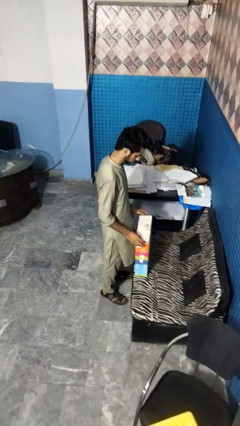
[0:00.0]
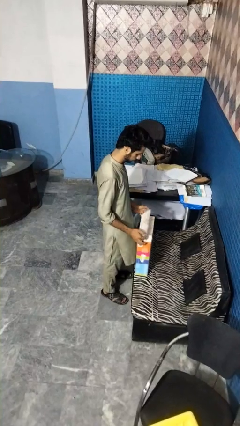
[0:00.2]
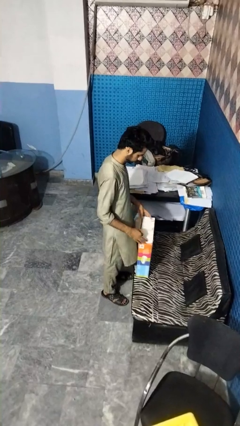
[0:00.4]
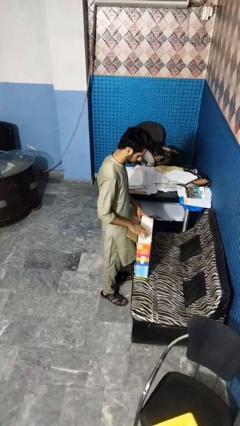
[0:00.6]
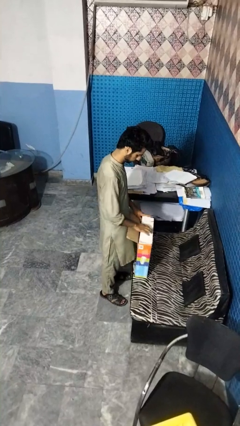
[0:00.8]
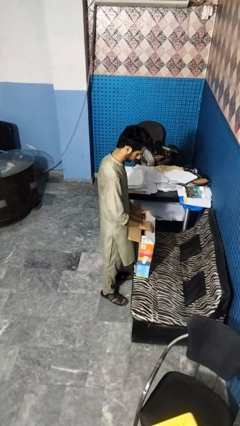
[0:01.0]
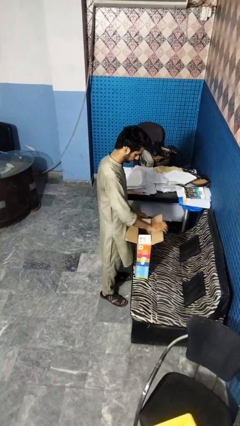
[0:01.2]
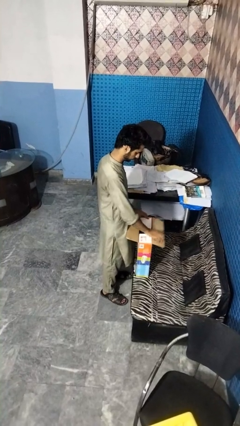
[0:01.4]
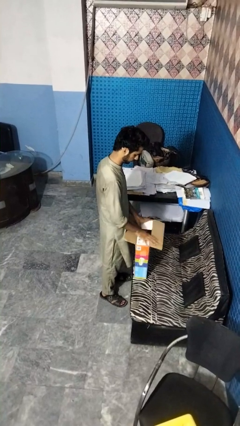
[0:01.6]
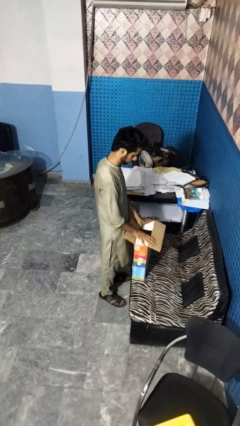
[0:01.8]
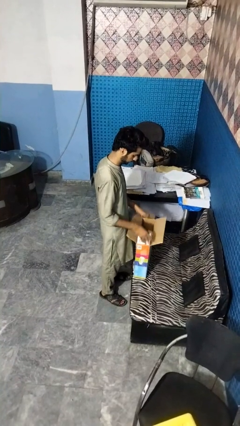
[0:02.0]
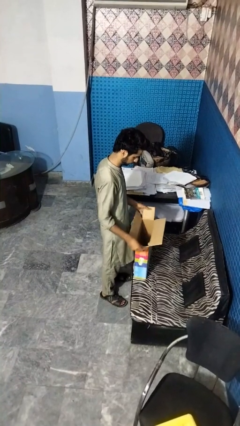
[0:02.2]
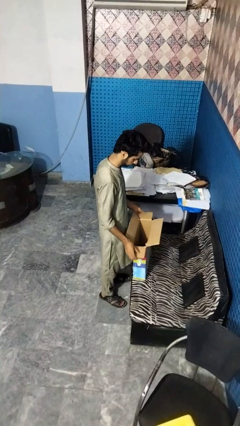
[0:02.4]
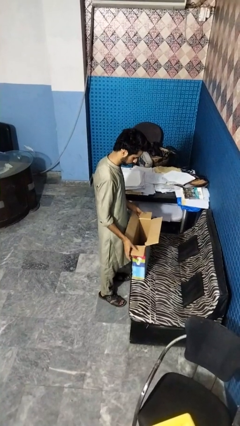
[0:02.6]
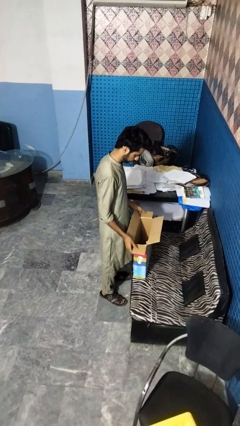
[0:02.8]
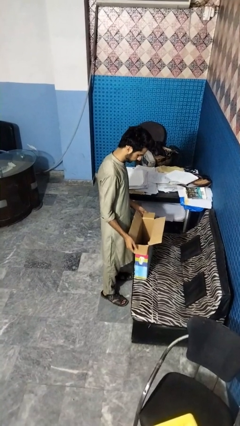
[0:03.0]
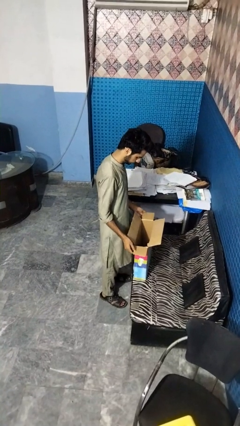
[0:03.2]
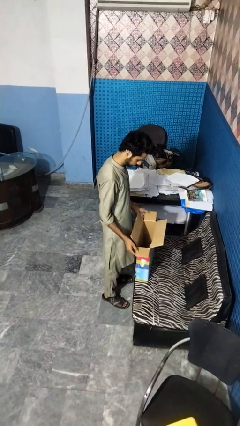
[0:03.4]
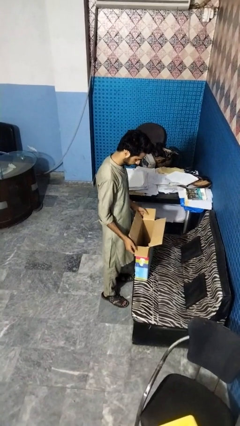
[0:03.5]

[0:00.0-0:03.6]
person opens box

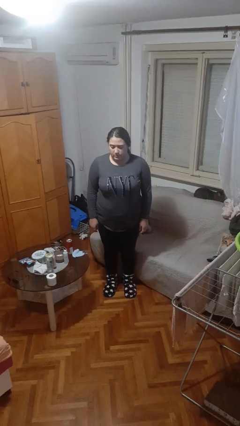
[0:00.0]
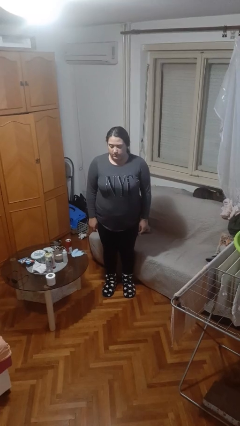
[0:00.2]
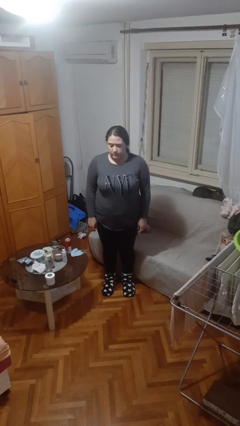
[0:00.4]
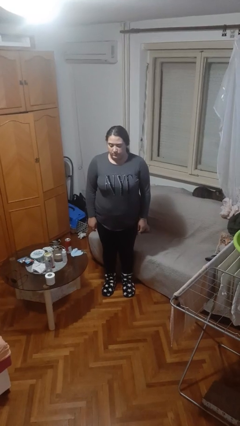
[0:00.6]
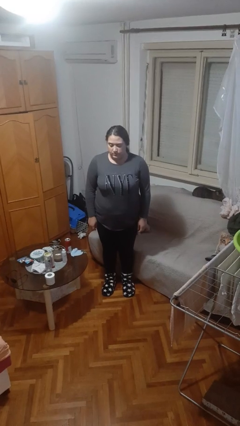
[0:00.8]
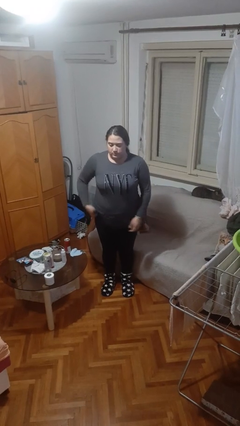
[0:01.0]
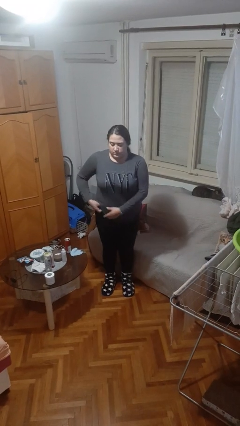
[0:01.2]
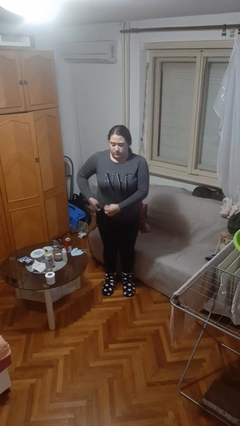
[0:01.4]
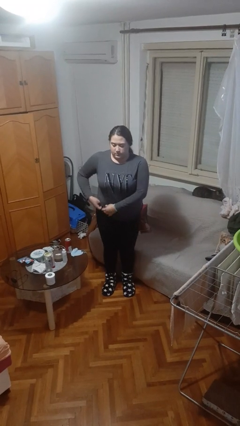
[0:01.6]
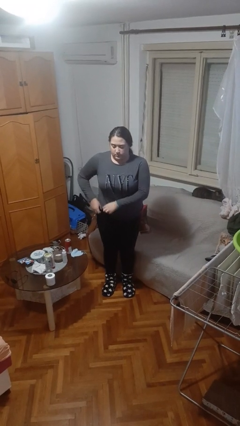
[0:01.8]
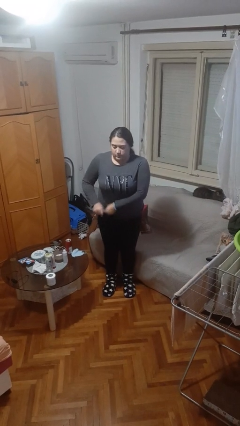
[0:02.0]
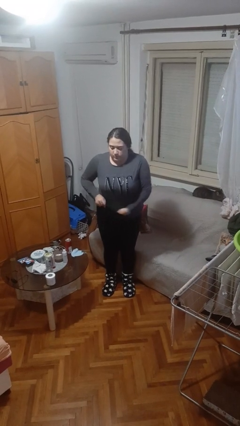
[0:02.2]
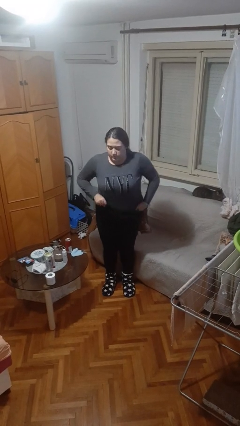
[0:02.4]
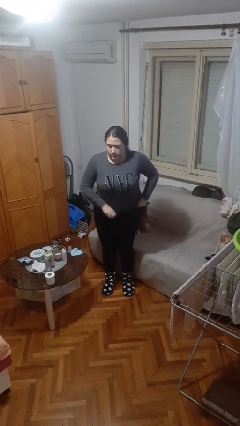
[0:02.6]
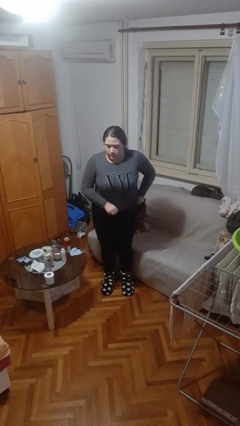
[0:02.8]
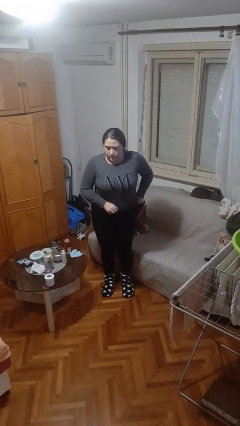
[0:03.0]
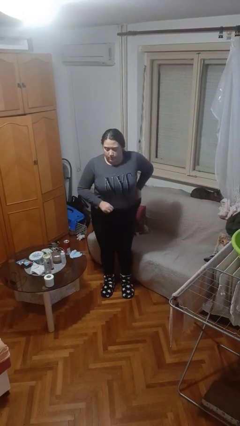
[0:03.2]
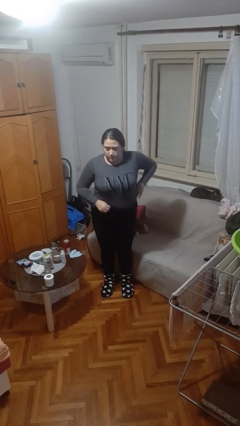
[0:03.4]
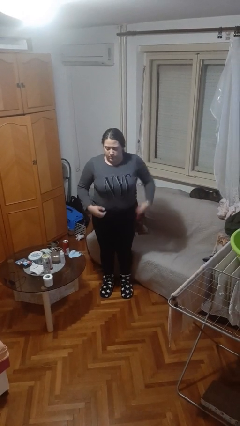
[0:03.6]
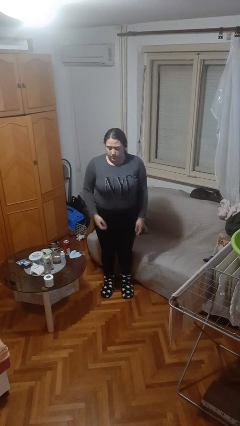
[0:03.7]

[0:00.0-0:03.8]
person tucks in shirt

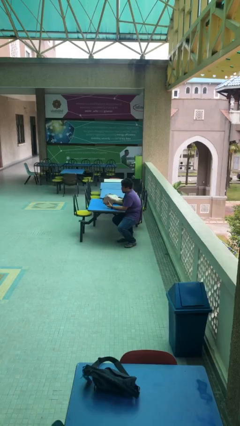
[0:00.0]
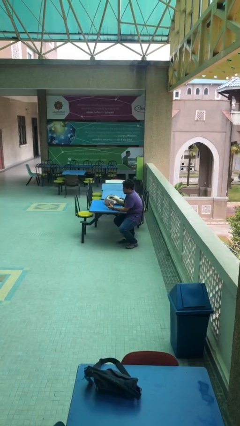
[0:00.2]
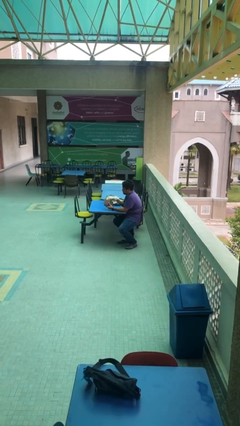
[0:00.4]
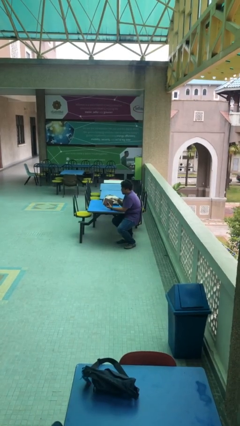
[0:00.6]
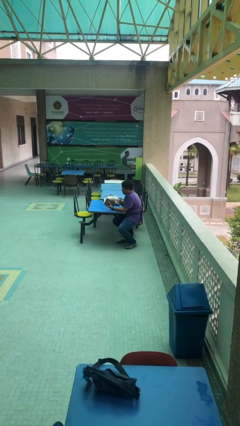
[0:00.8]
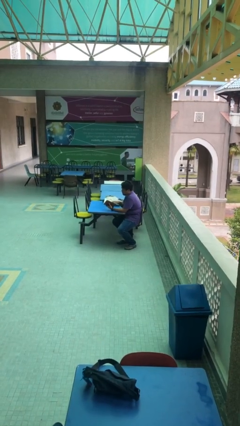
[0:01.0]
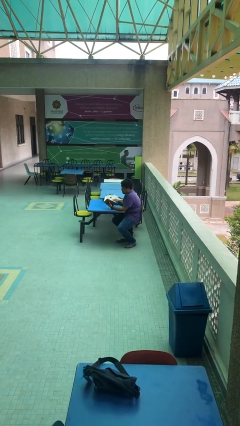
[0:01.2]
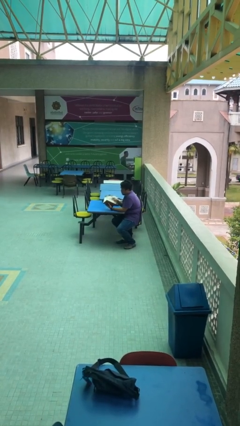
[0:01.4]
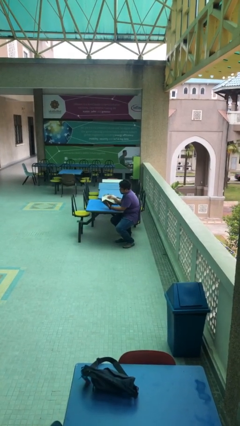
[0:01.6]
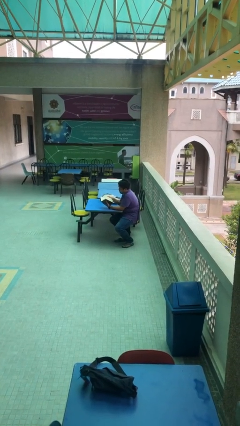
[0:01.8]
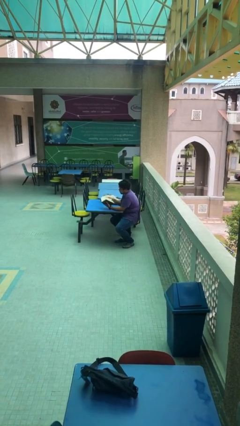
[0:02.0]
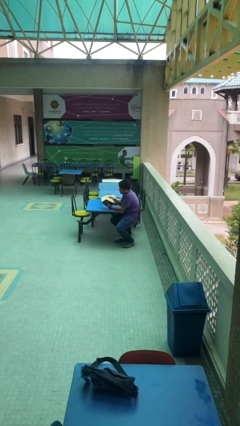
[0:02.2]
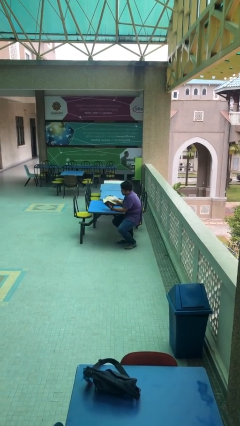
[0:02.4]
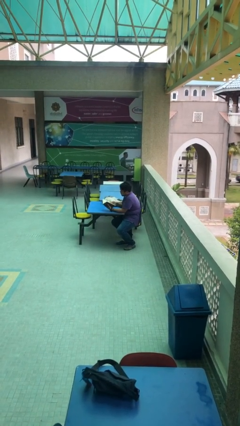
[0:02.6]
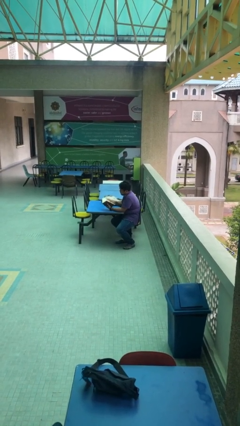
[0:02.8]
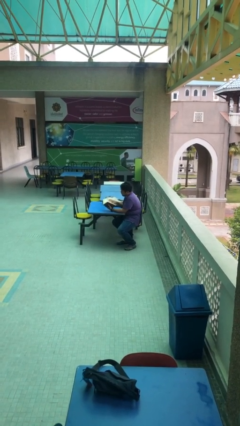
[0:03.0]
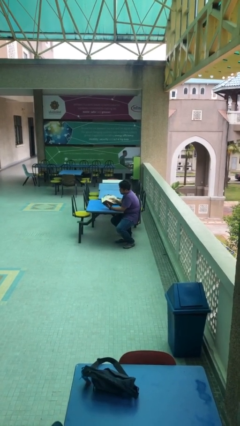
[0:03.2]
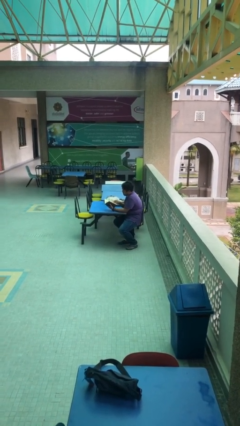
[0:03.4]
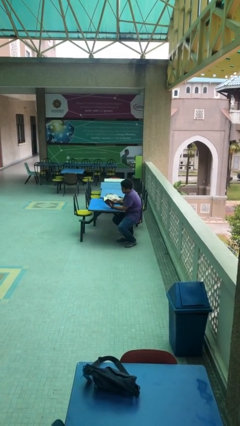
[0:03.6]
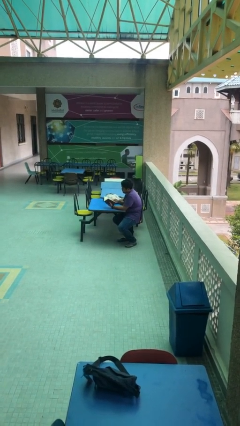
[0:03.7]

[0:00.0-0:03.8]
person reads document

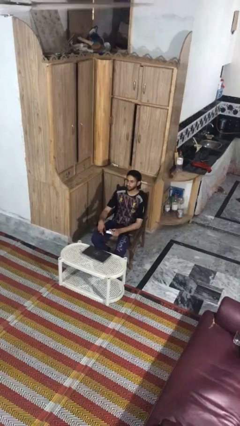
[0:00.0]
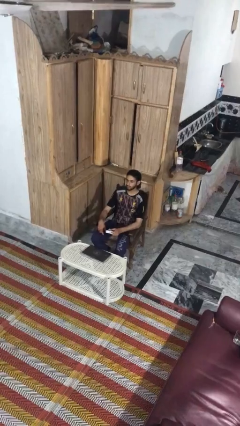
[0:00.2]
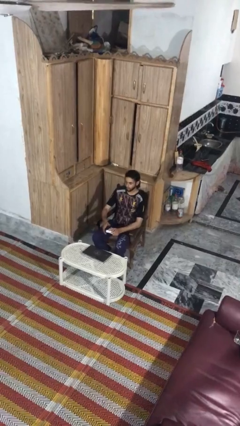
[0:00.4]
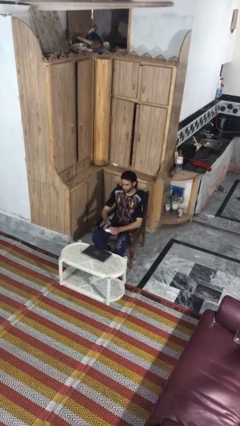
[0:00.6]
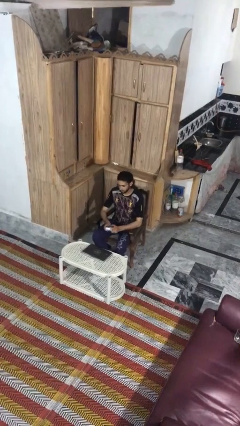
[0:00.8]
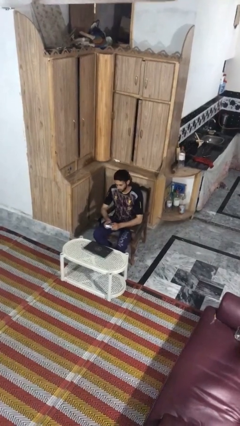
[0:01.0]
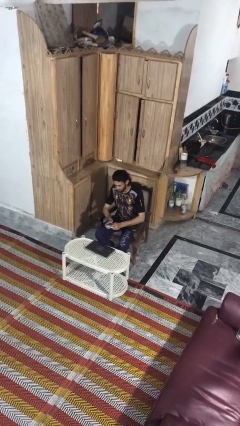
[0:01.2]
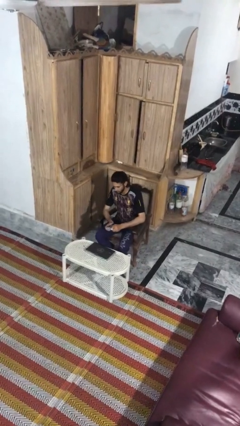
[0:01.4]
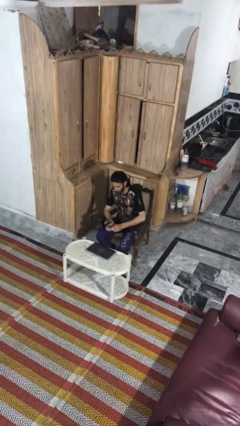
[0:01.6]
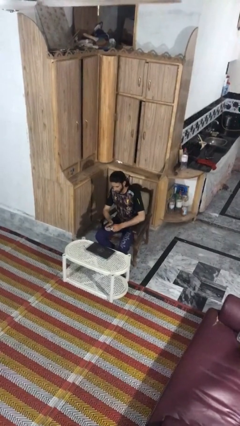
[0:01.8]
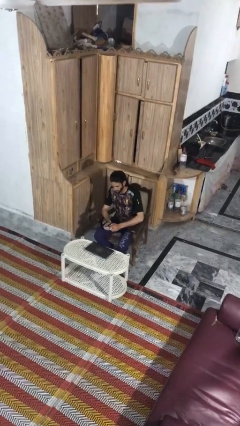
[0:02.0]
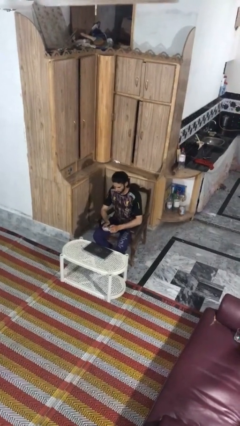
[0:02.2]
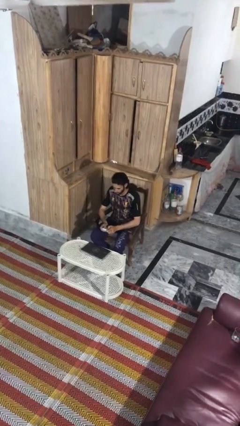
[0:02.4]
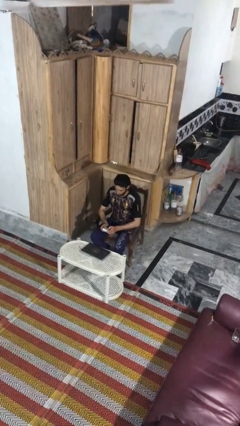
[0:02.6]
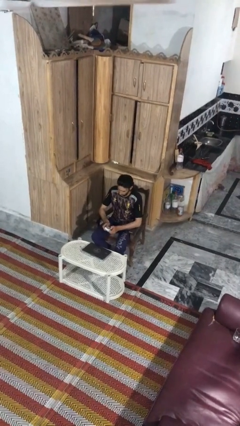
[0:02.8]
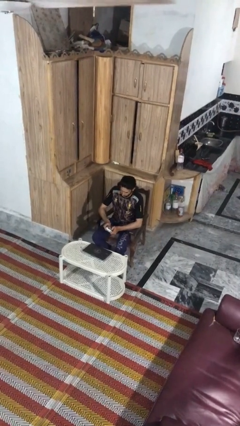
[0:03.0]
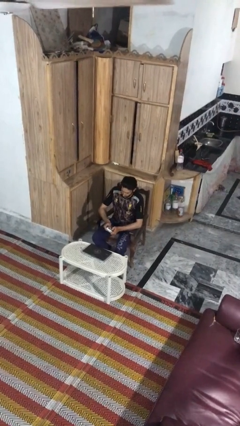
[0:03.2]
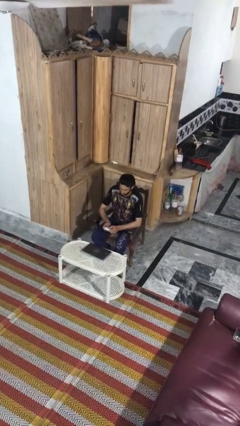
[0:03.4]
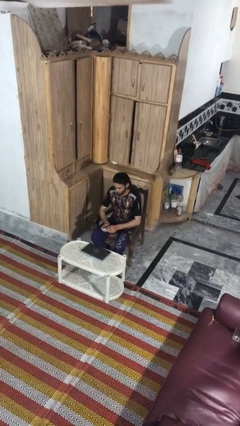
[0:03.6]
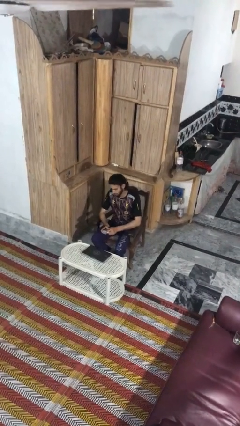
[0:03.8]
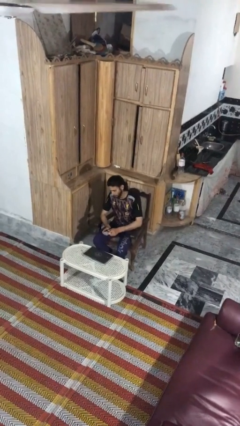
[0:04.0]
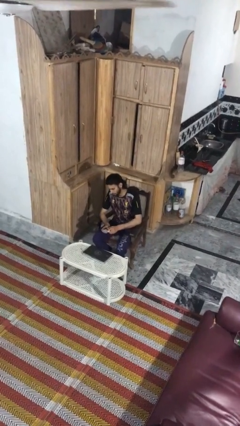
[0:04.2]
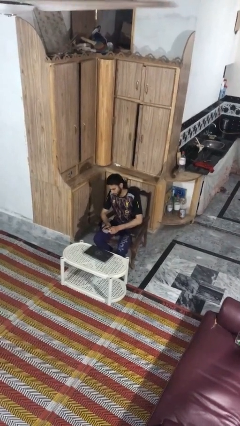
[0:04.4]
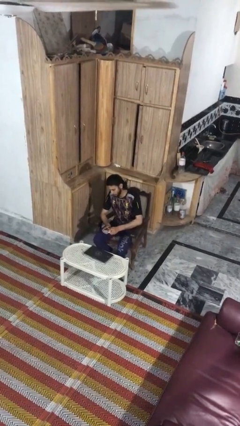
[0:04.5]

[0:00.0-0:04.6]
person interacts with handheld game

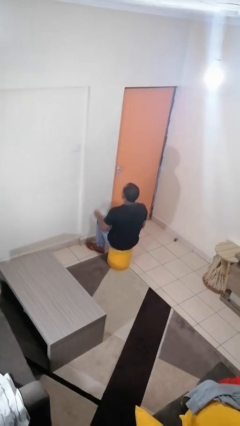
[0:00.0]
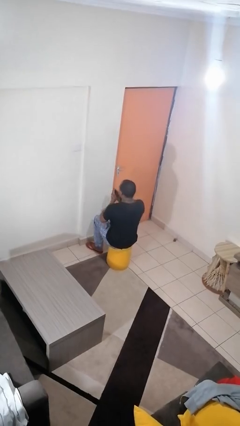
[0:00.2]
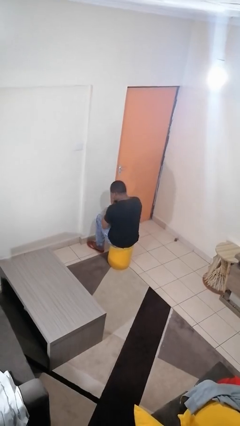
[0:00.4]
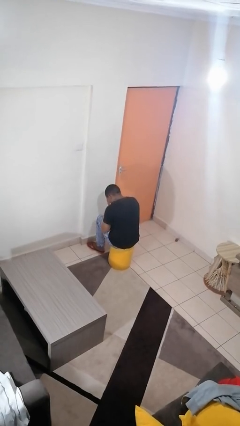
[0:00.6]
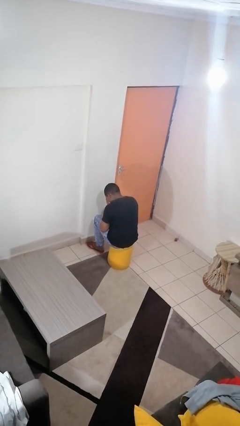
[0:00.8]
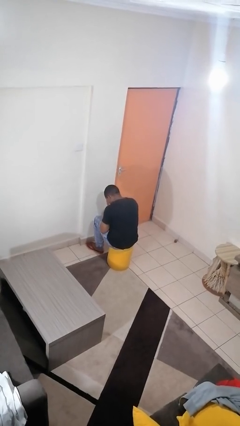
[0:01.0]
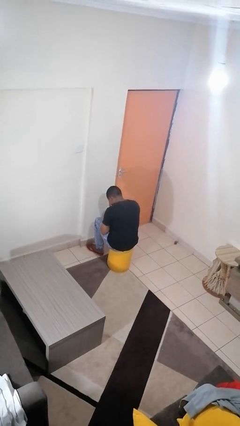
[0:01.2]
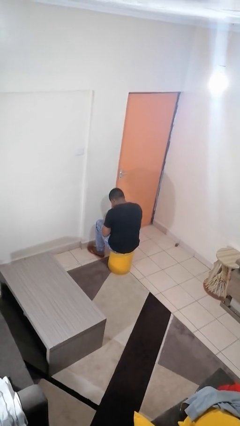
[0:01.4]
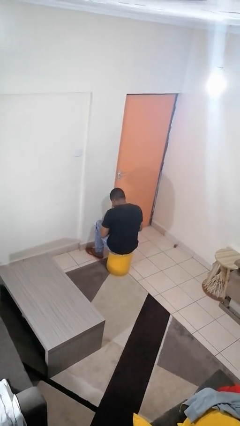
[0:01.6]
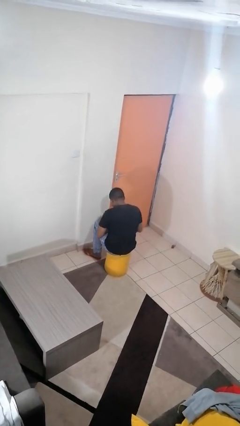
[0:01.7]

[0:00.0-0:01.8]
person sneezes into hand
